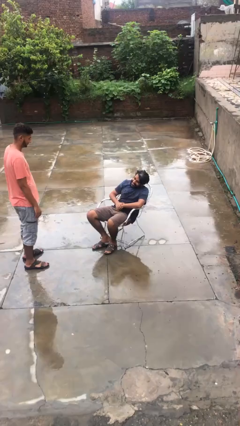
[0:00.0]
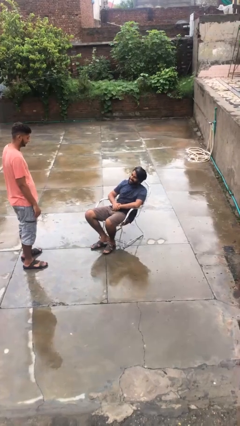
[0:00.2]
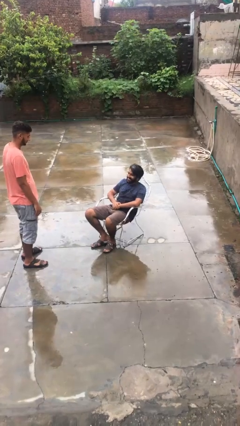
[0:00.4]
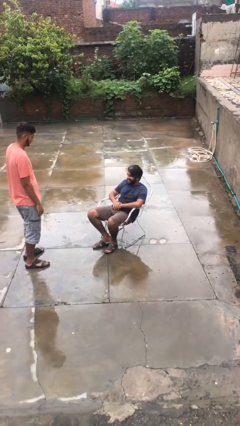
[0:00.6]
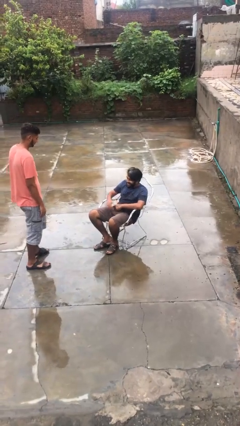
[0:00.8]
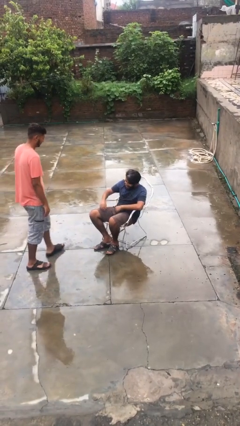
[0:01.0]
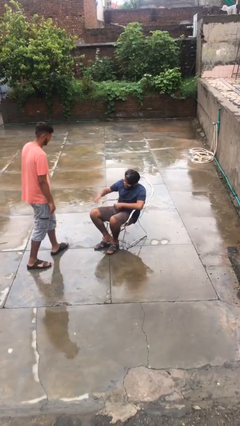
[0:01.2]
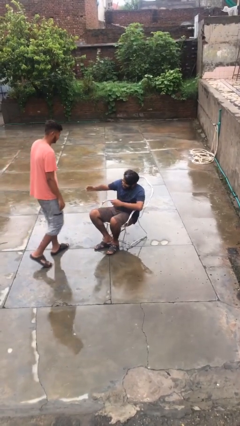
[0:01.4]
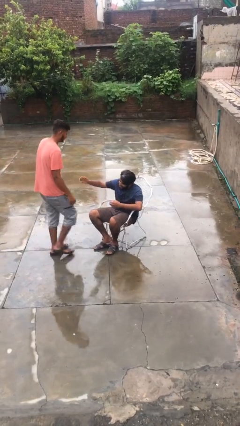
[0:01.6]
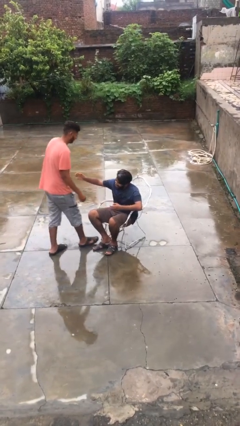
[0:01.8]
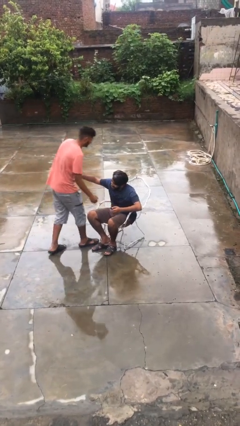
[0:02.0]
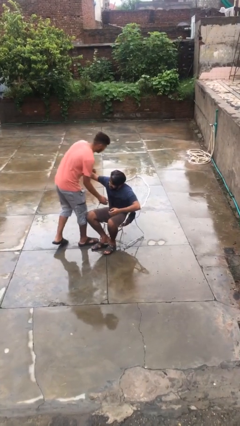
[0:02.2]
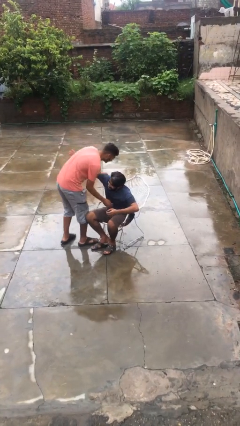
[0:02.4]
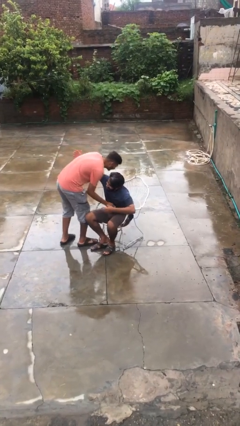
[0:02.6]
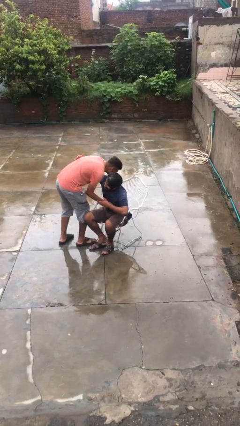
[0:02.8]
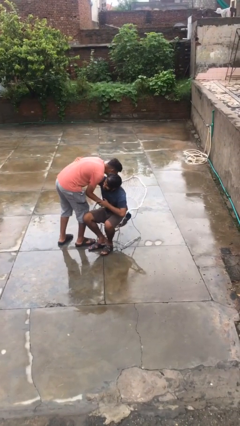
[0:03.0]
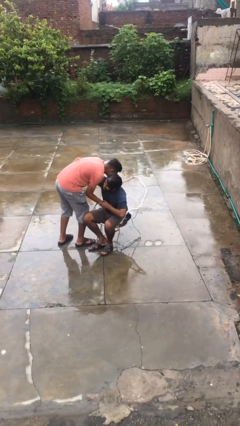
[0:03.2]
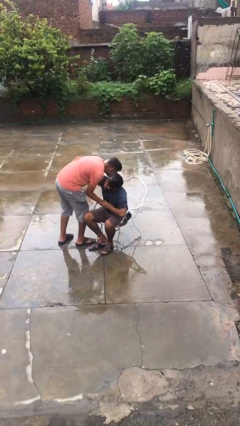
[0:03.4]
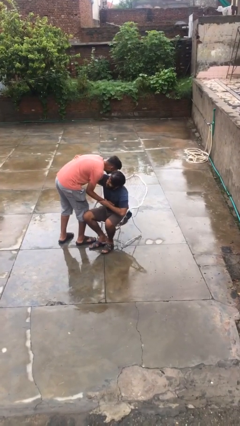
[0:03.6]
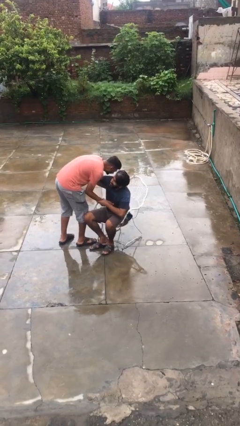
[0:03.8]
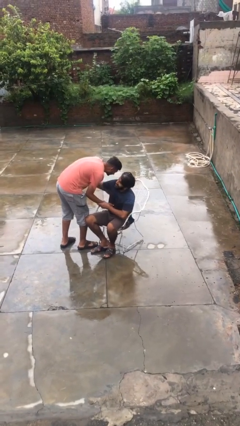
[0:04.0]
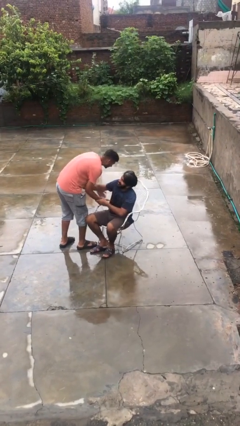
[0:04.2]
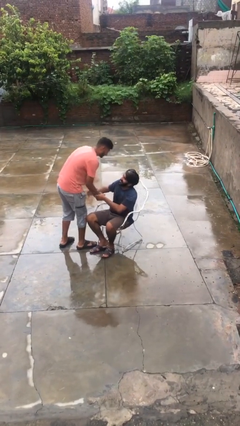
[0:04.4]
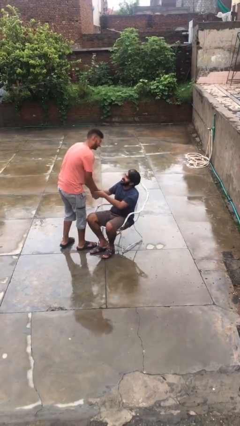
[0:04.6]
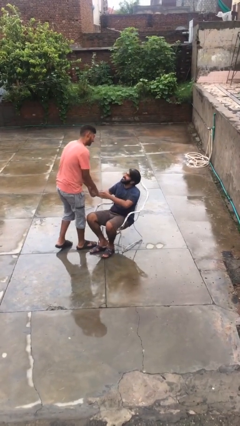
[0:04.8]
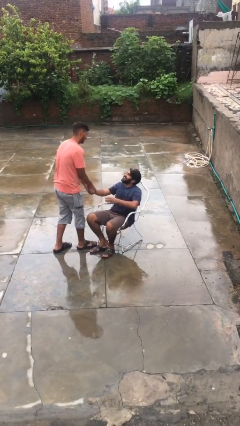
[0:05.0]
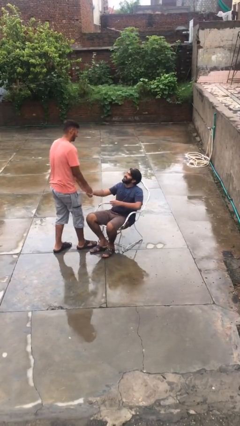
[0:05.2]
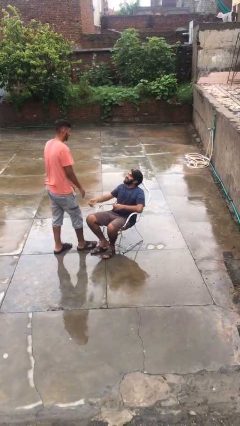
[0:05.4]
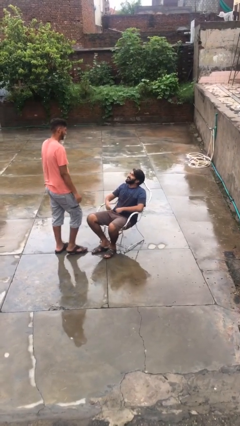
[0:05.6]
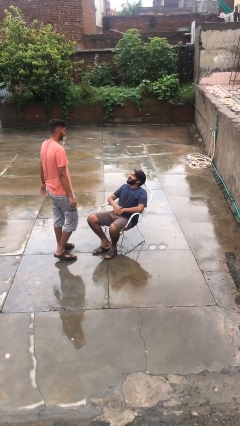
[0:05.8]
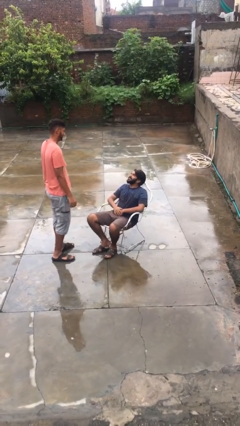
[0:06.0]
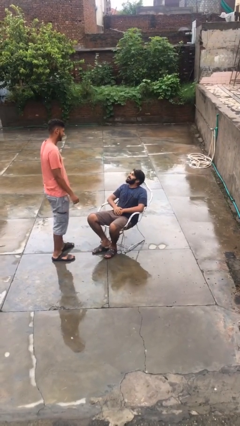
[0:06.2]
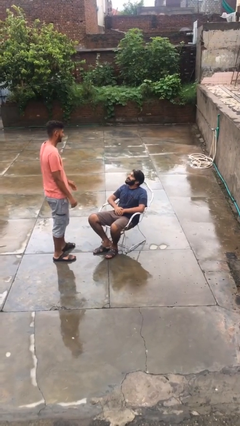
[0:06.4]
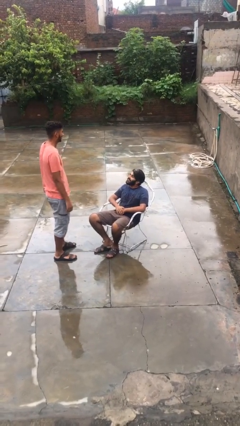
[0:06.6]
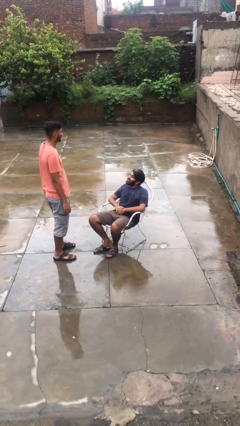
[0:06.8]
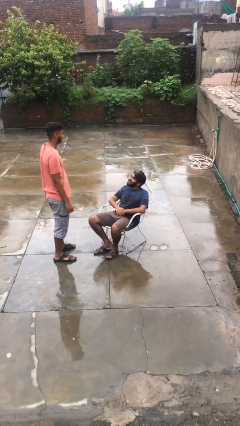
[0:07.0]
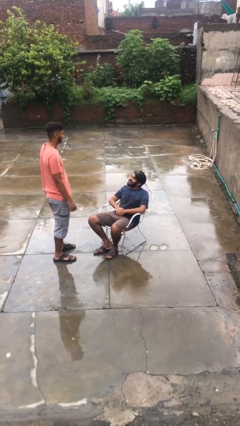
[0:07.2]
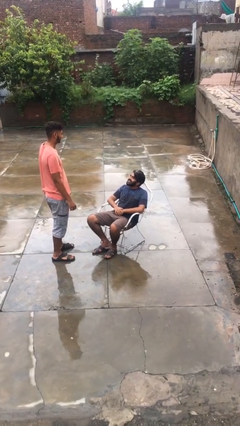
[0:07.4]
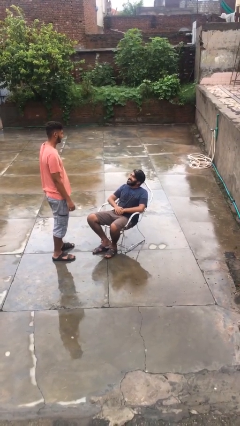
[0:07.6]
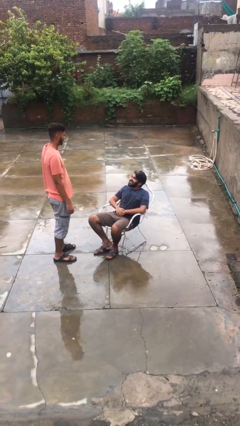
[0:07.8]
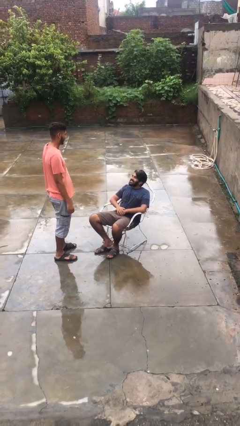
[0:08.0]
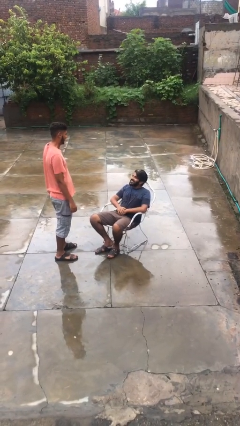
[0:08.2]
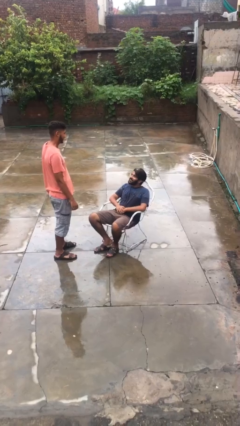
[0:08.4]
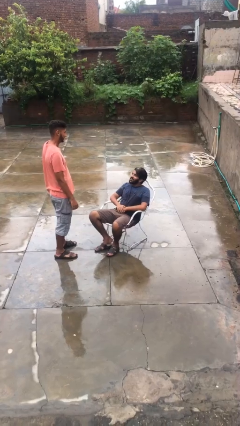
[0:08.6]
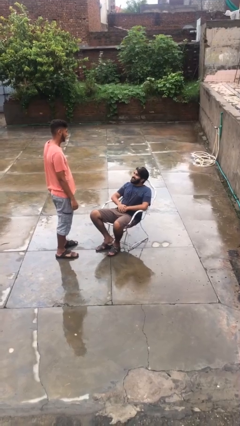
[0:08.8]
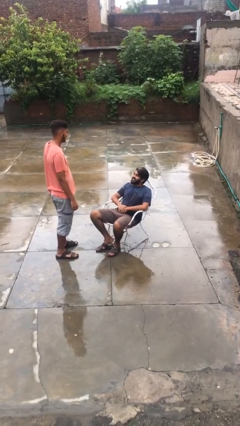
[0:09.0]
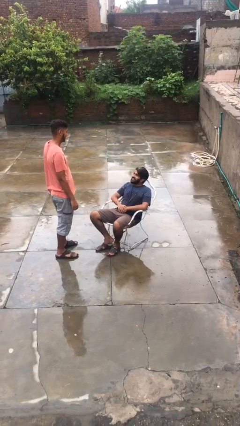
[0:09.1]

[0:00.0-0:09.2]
person embraces person

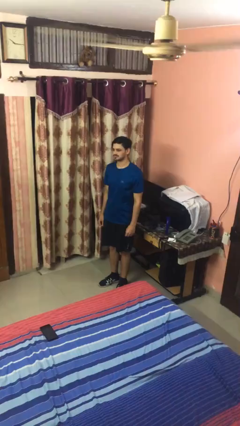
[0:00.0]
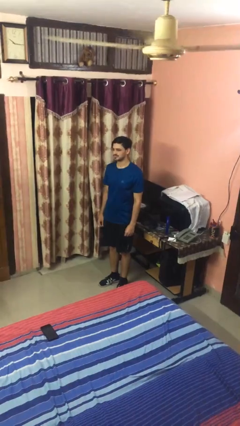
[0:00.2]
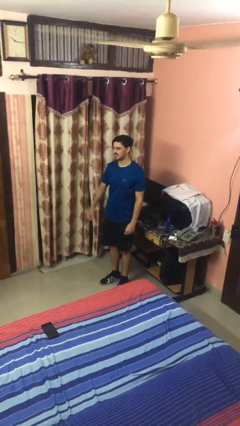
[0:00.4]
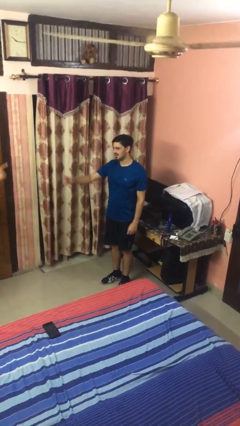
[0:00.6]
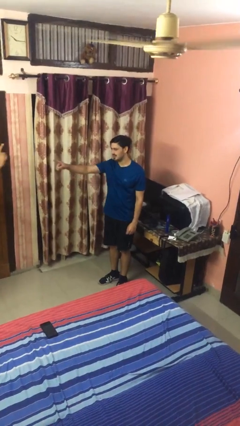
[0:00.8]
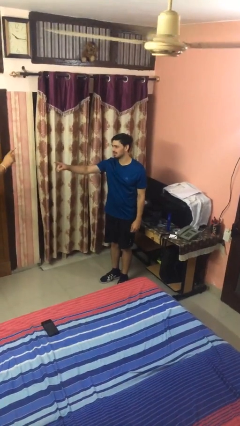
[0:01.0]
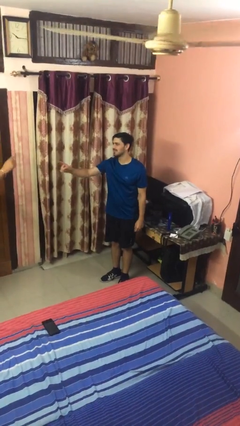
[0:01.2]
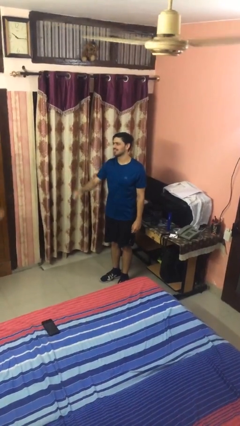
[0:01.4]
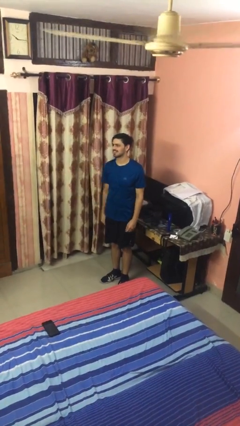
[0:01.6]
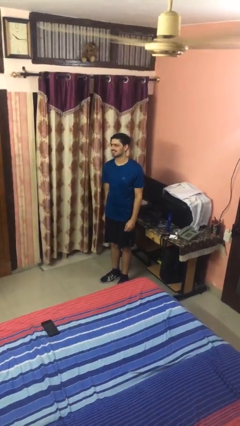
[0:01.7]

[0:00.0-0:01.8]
person points at person

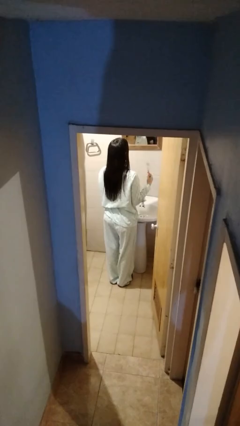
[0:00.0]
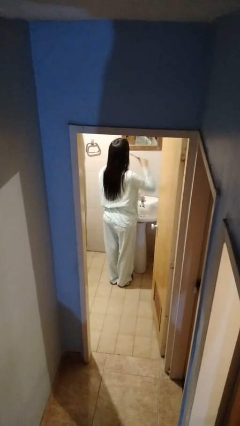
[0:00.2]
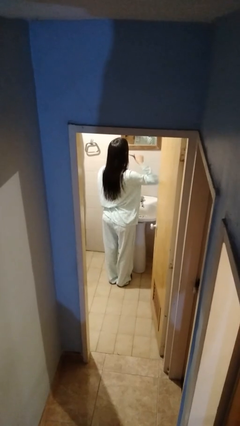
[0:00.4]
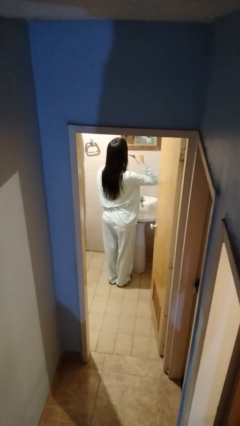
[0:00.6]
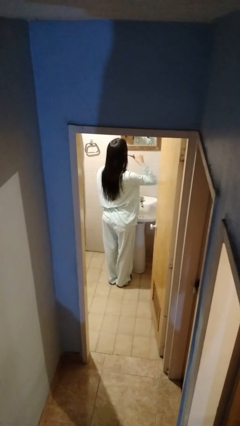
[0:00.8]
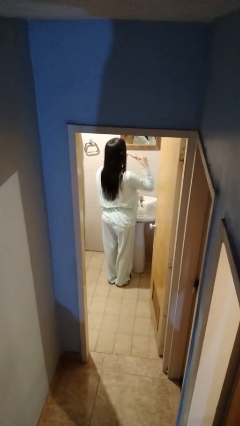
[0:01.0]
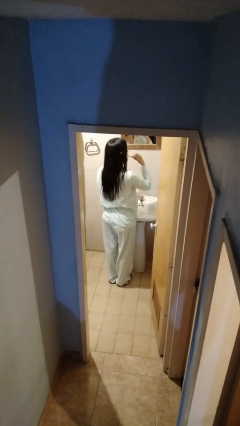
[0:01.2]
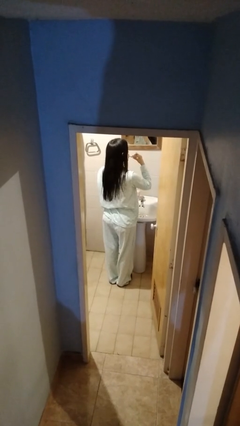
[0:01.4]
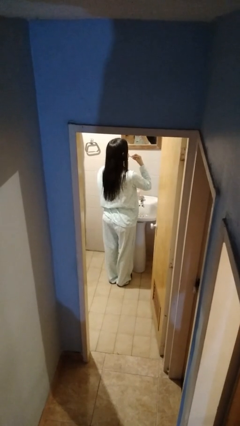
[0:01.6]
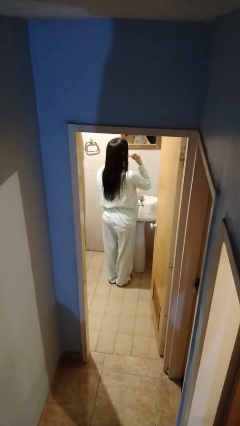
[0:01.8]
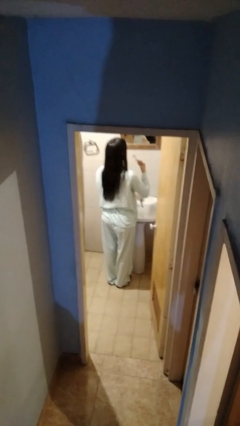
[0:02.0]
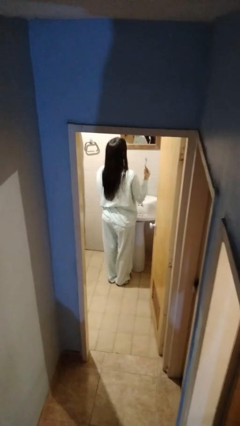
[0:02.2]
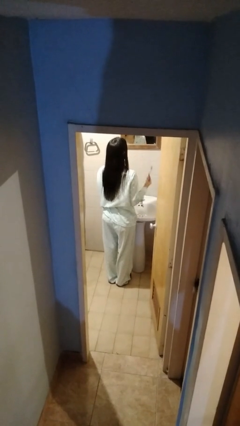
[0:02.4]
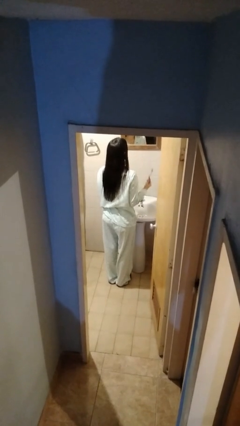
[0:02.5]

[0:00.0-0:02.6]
person brushes teeth

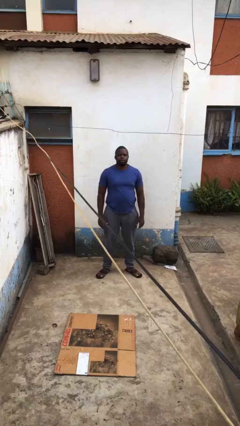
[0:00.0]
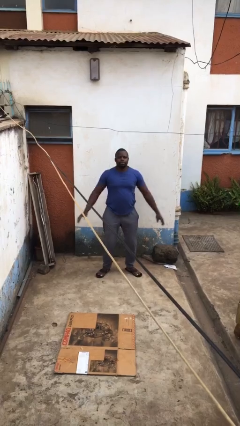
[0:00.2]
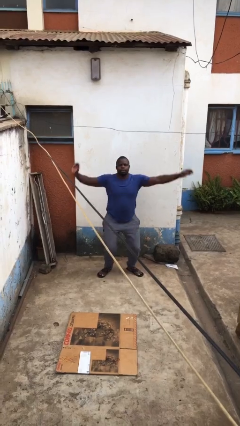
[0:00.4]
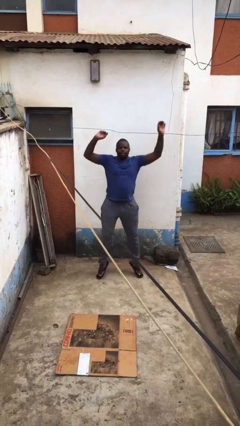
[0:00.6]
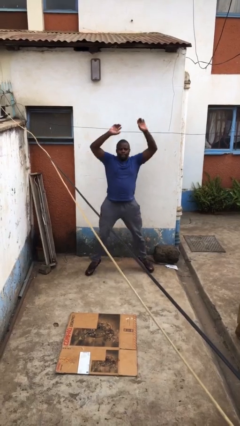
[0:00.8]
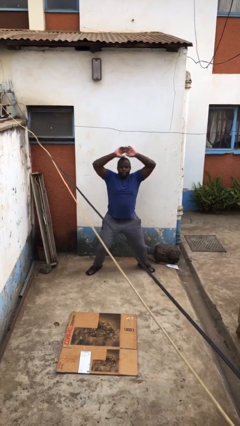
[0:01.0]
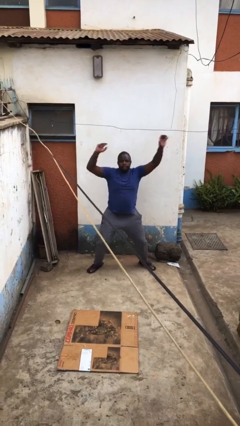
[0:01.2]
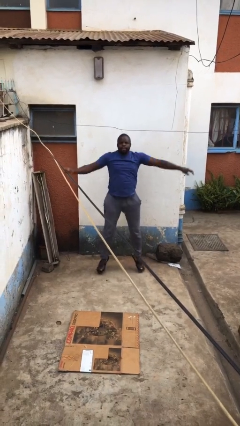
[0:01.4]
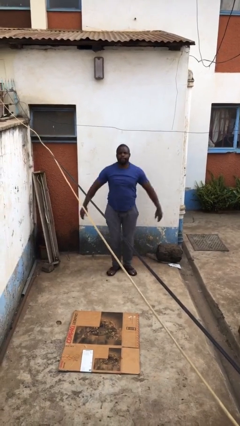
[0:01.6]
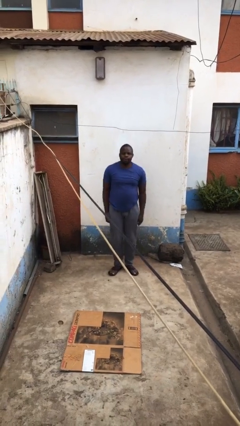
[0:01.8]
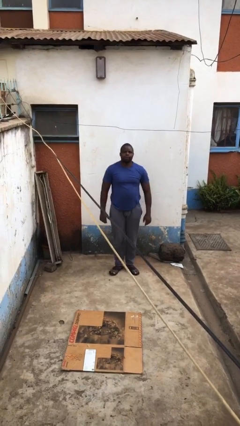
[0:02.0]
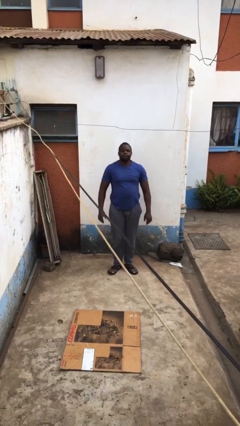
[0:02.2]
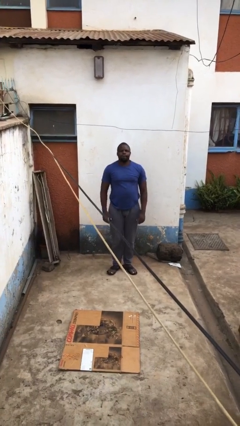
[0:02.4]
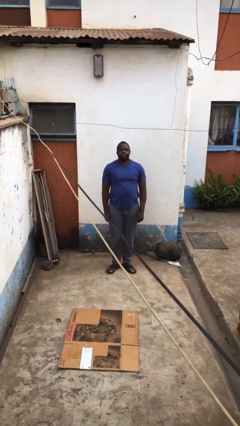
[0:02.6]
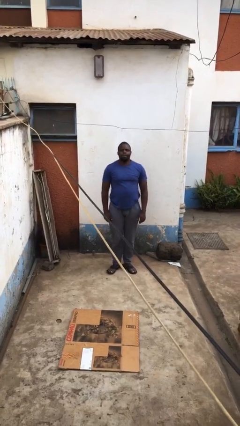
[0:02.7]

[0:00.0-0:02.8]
person exercises with jumping jacks

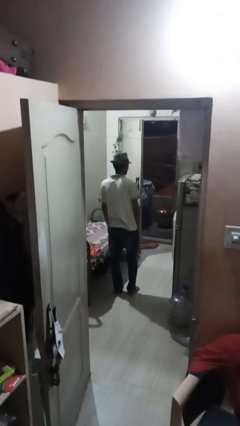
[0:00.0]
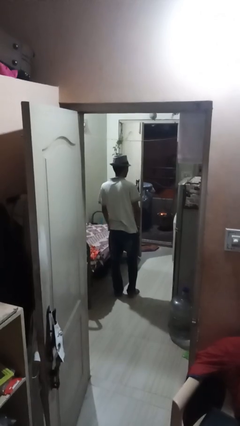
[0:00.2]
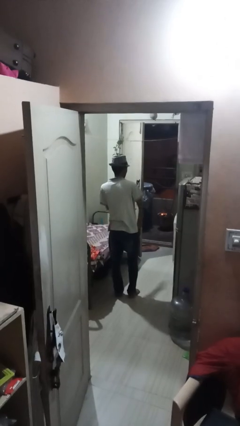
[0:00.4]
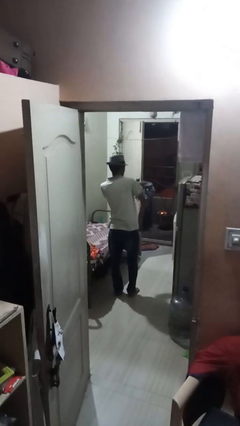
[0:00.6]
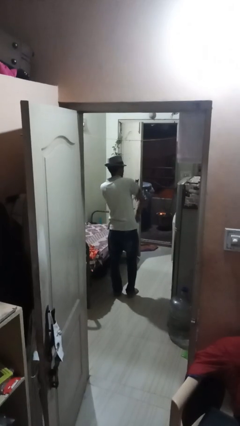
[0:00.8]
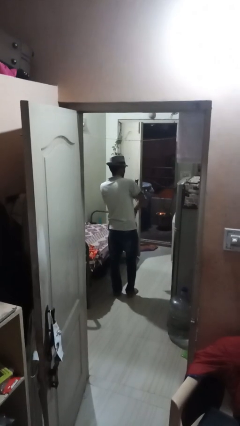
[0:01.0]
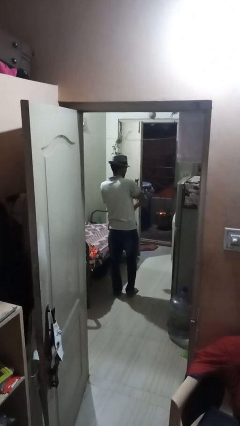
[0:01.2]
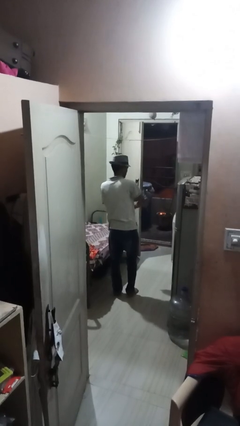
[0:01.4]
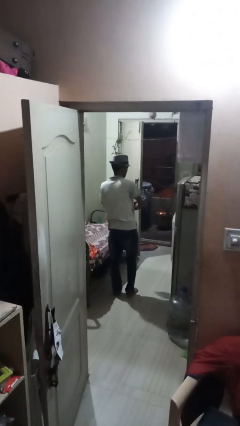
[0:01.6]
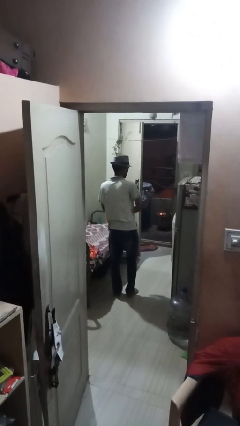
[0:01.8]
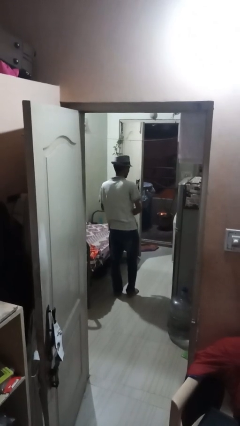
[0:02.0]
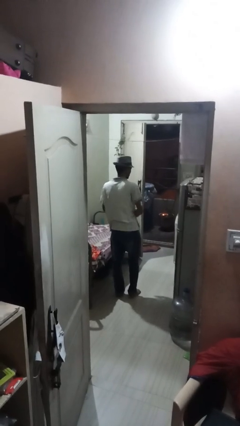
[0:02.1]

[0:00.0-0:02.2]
person swats bug
